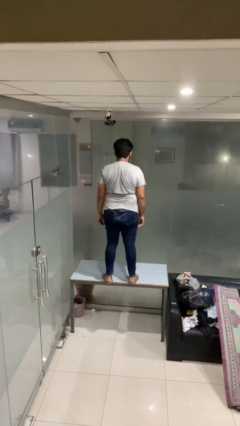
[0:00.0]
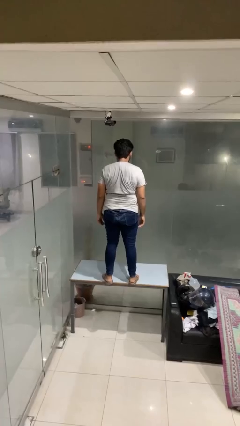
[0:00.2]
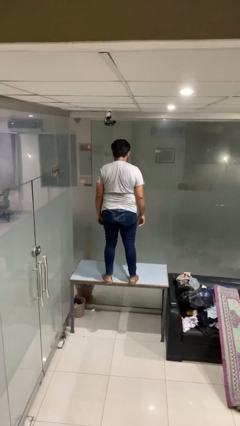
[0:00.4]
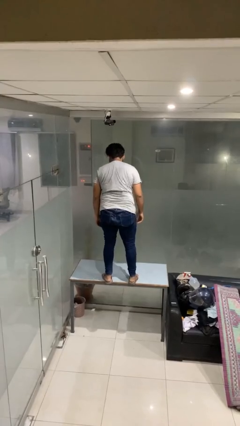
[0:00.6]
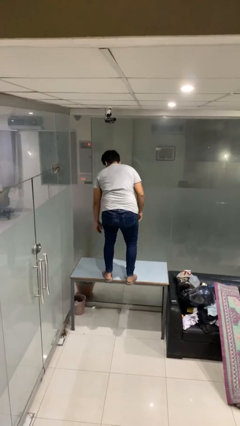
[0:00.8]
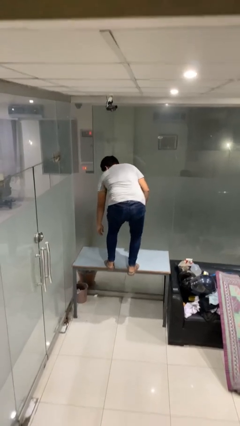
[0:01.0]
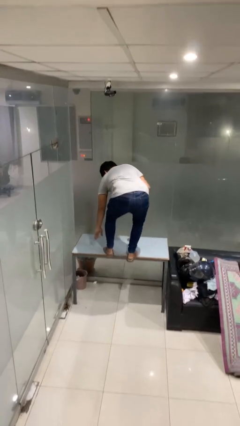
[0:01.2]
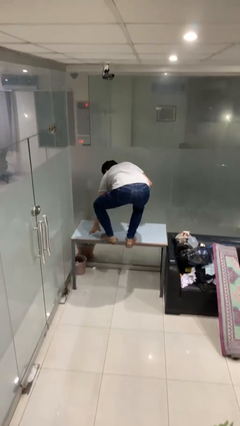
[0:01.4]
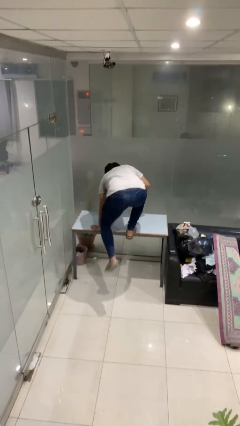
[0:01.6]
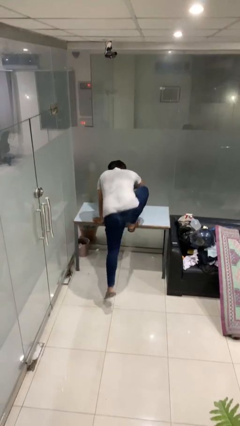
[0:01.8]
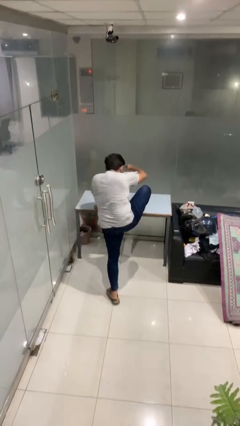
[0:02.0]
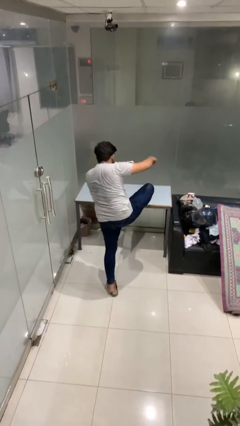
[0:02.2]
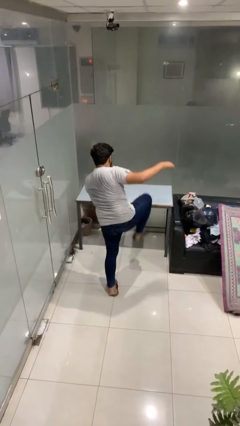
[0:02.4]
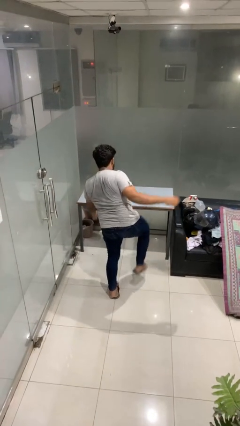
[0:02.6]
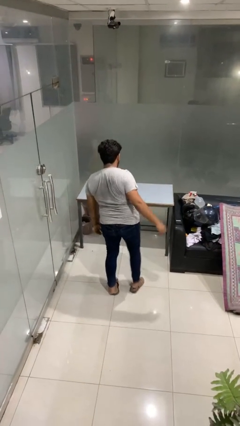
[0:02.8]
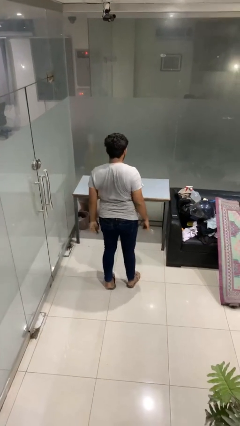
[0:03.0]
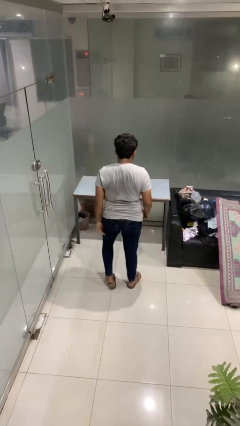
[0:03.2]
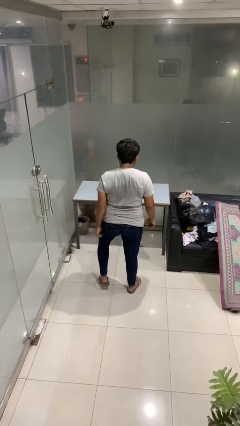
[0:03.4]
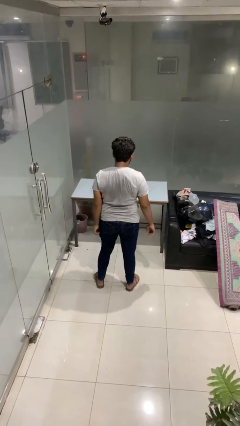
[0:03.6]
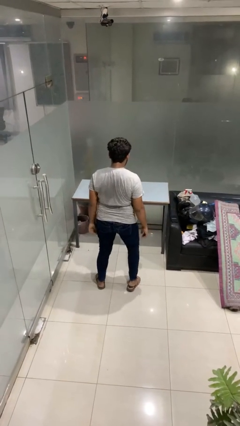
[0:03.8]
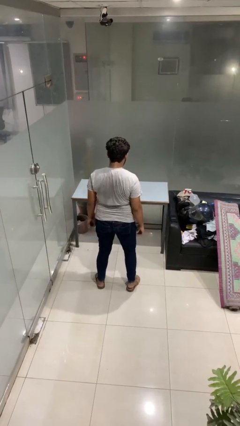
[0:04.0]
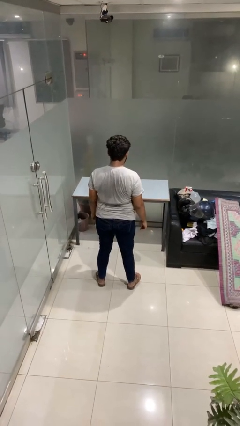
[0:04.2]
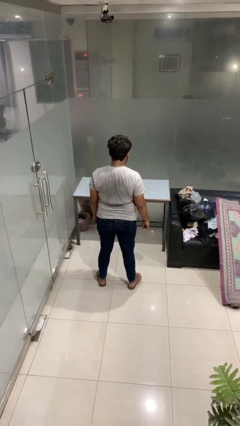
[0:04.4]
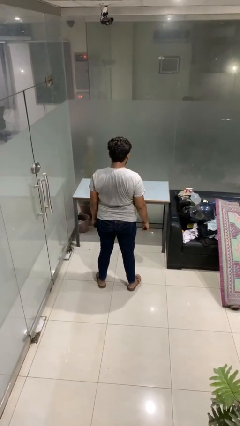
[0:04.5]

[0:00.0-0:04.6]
person climbs off table

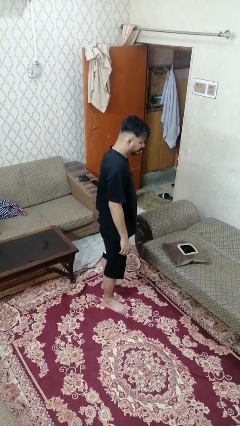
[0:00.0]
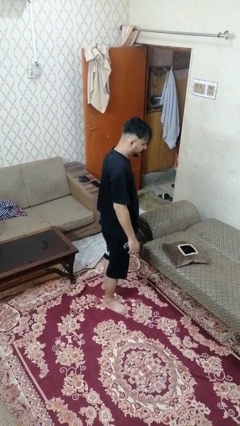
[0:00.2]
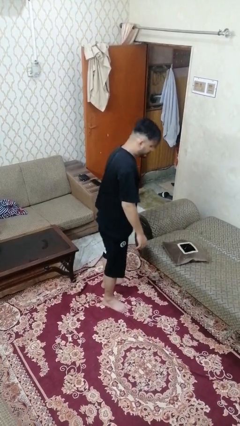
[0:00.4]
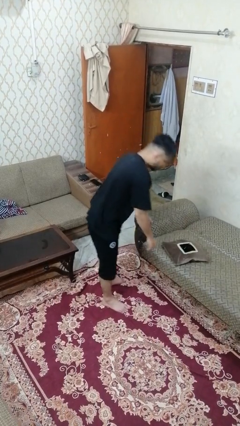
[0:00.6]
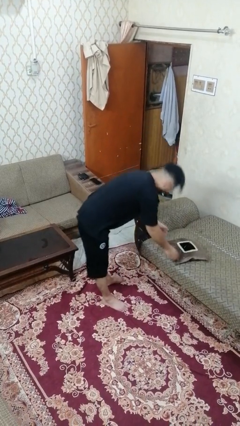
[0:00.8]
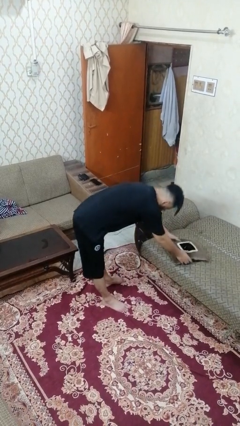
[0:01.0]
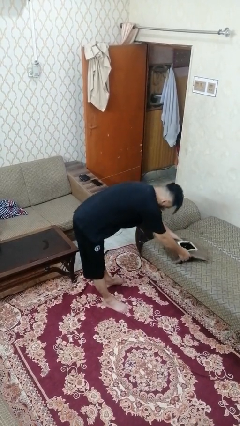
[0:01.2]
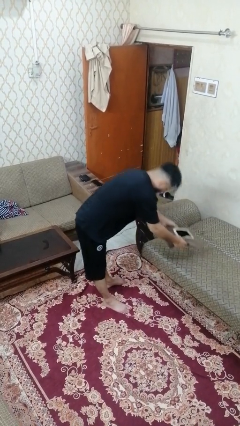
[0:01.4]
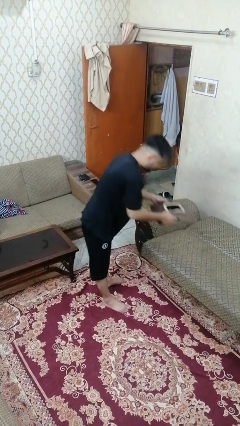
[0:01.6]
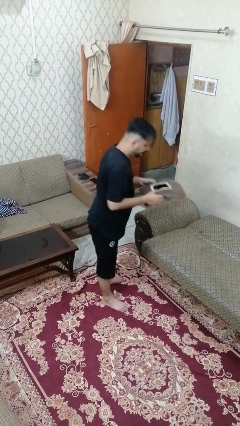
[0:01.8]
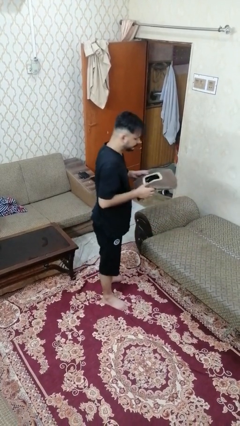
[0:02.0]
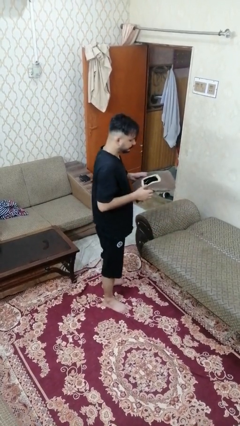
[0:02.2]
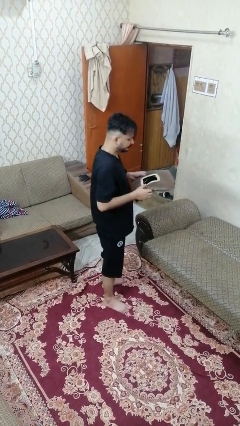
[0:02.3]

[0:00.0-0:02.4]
person picks up object from couch

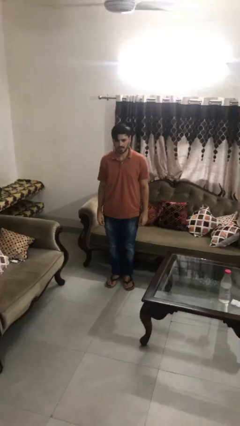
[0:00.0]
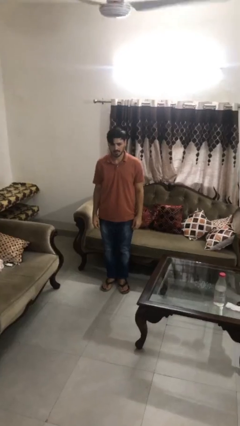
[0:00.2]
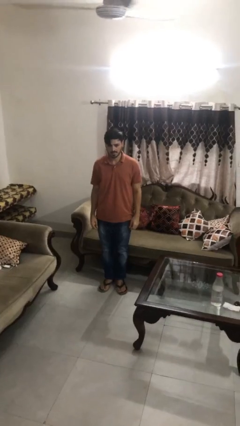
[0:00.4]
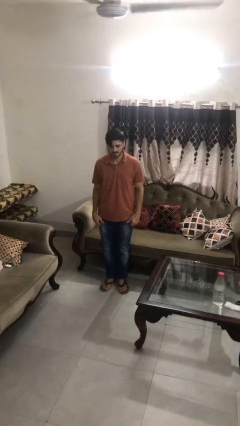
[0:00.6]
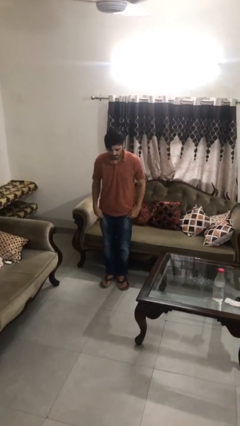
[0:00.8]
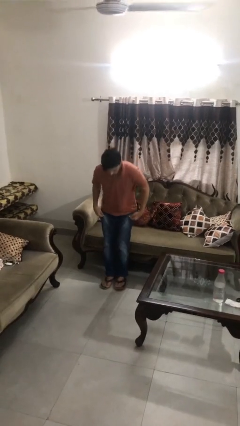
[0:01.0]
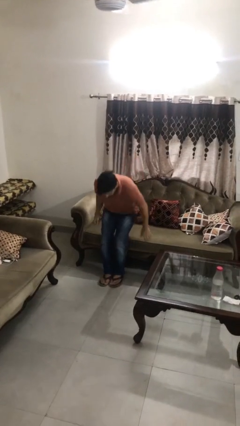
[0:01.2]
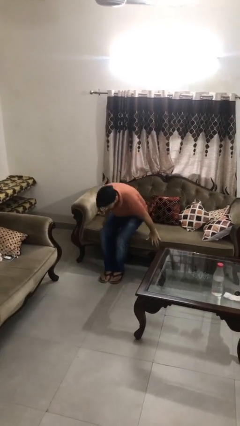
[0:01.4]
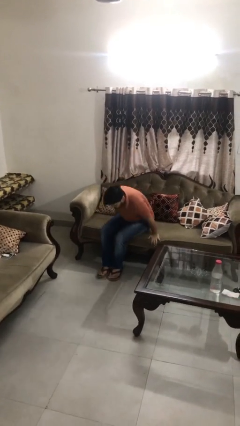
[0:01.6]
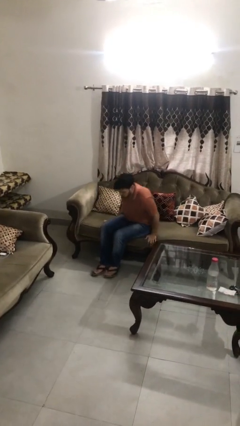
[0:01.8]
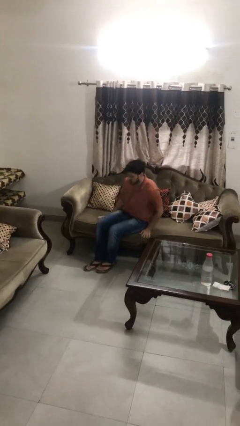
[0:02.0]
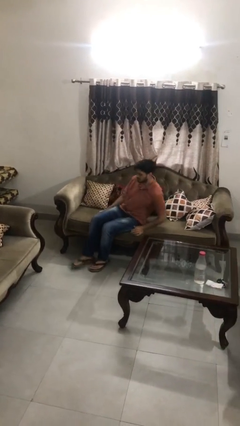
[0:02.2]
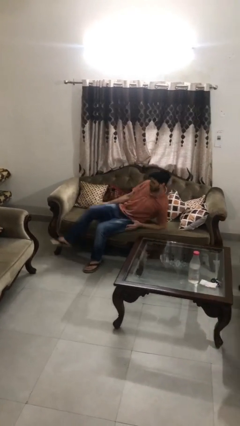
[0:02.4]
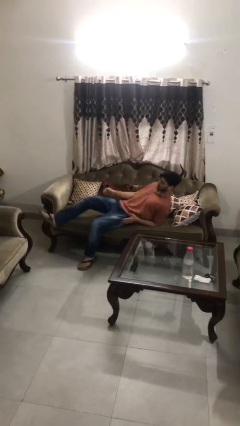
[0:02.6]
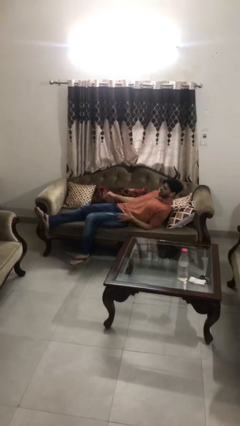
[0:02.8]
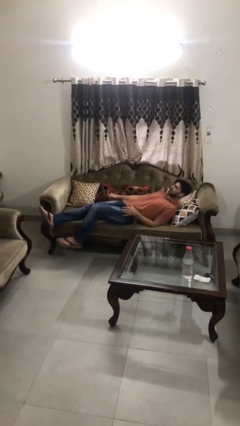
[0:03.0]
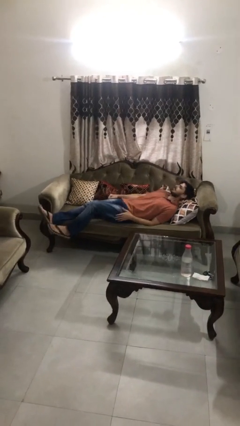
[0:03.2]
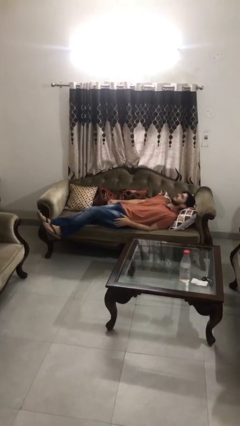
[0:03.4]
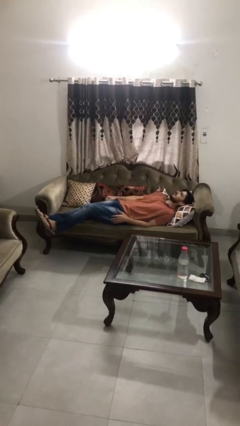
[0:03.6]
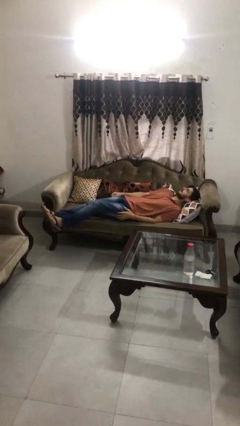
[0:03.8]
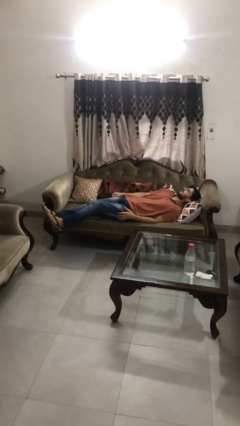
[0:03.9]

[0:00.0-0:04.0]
person lies down on couch

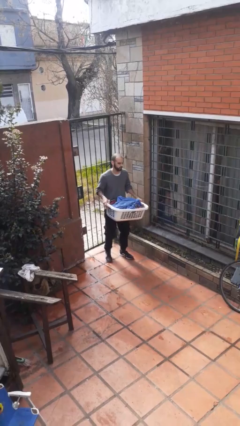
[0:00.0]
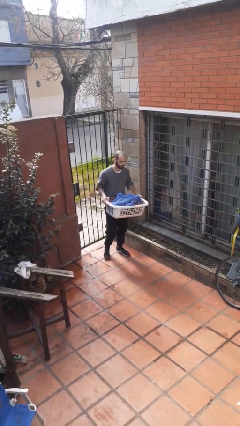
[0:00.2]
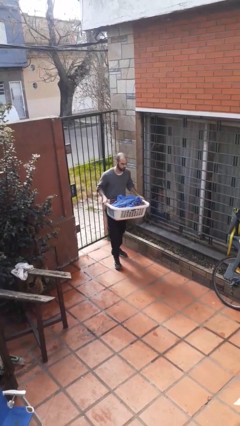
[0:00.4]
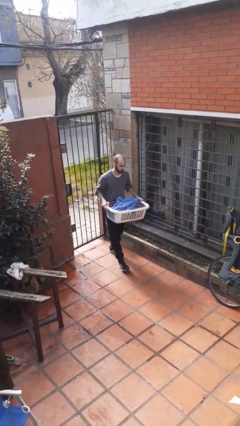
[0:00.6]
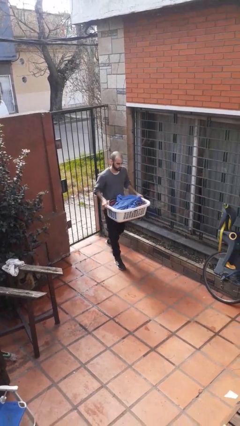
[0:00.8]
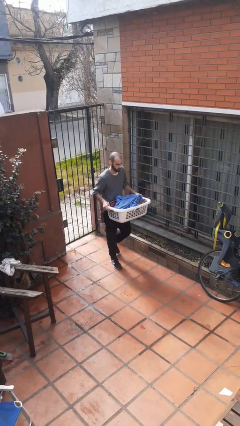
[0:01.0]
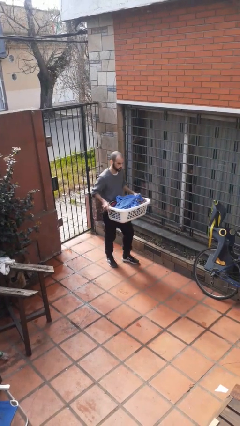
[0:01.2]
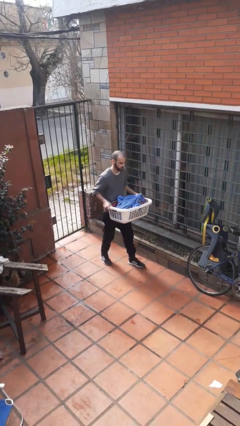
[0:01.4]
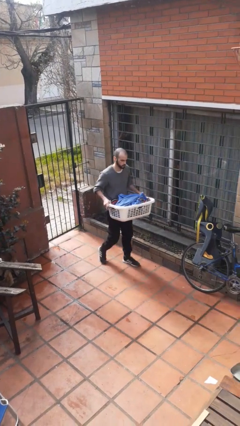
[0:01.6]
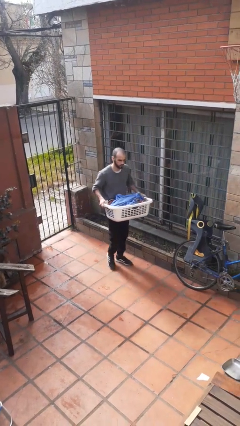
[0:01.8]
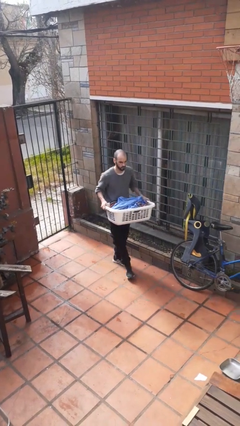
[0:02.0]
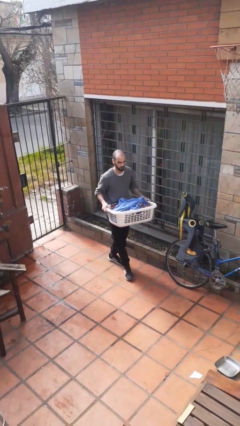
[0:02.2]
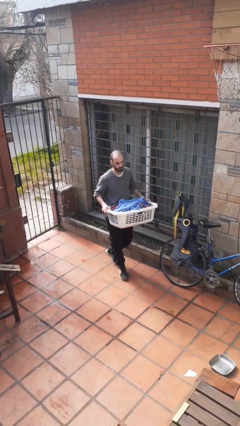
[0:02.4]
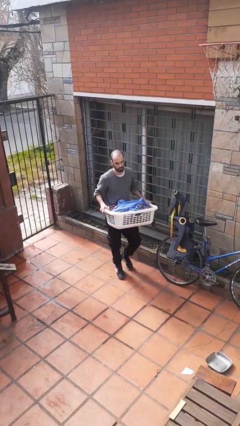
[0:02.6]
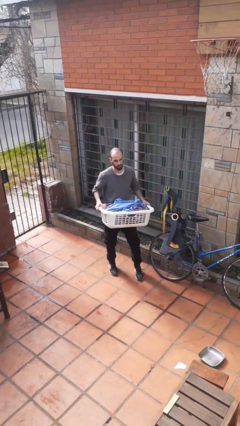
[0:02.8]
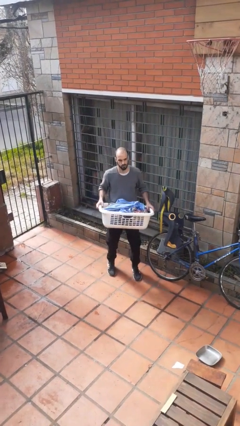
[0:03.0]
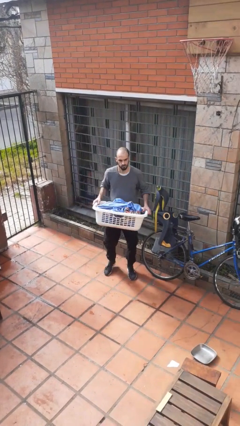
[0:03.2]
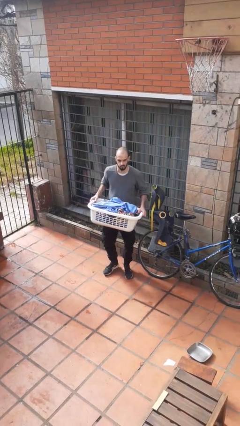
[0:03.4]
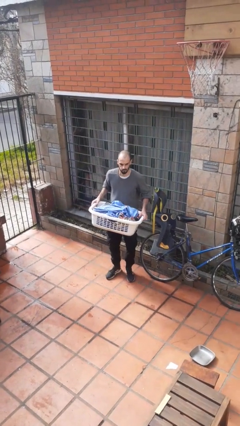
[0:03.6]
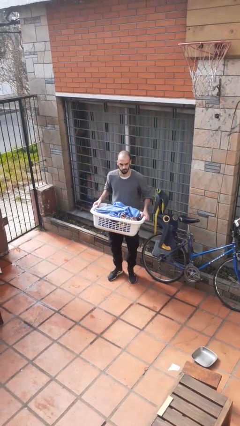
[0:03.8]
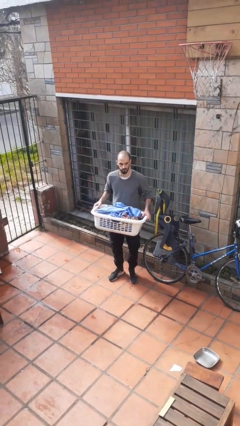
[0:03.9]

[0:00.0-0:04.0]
person carries laundry basket

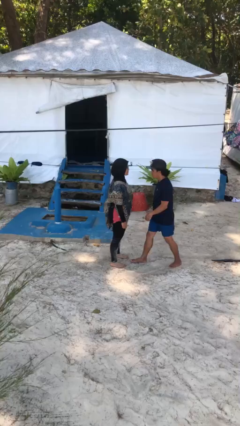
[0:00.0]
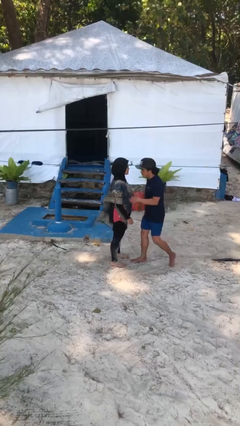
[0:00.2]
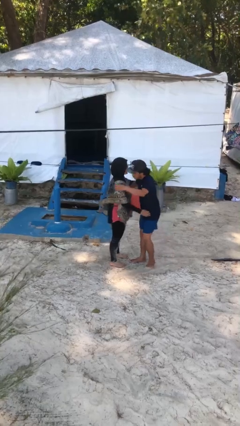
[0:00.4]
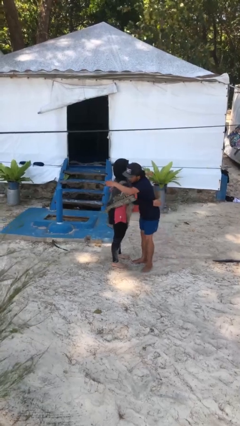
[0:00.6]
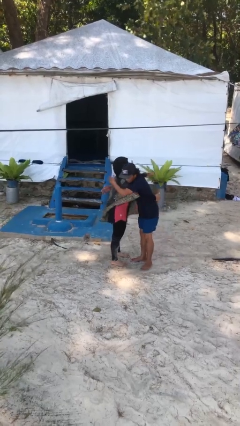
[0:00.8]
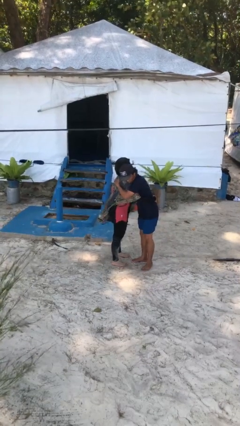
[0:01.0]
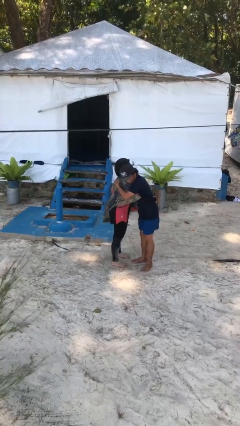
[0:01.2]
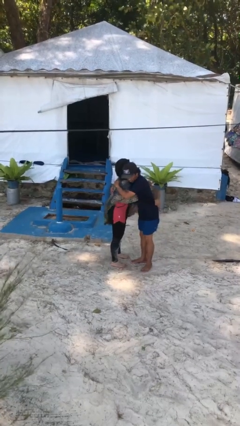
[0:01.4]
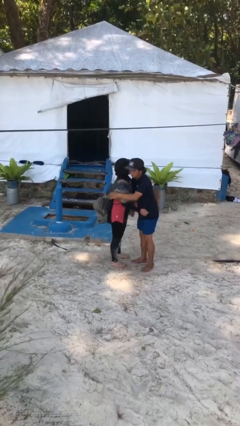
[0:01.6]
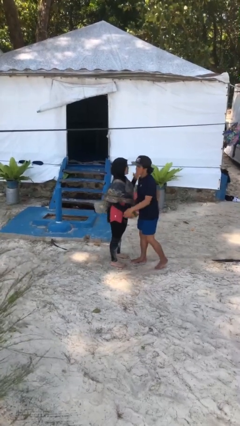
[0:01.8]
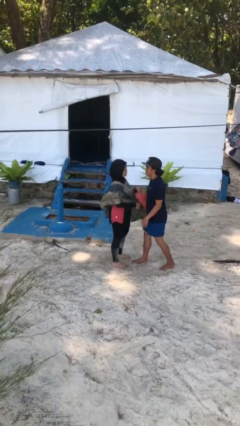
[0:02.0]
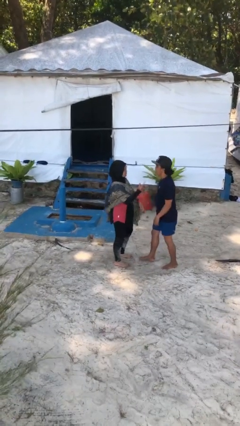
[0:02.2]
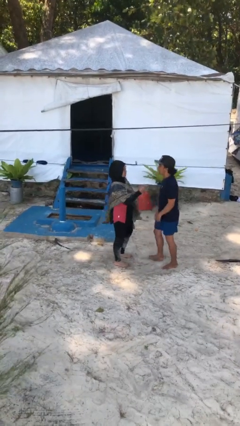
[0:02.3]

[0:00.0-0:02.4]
person embraces person

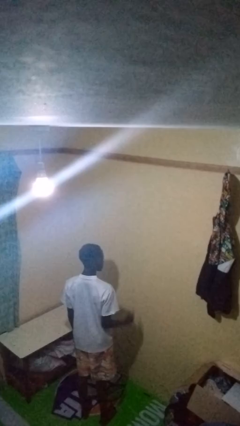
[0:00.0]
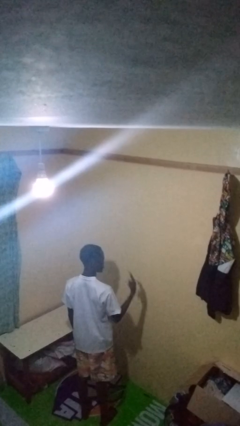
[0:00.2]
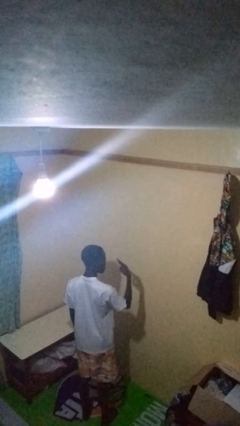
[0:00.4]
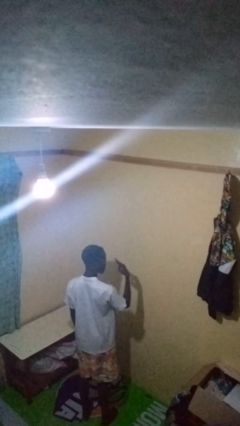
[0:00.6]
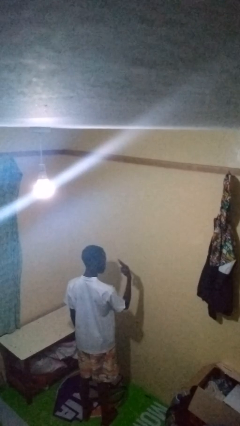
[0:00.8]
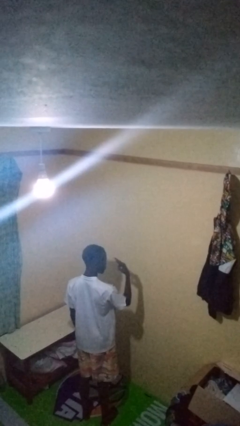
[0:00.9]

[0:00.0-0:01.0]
person gestures watch closely
